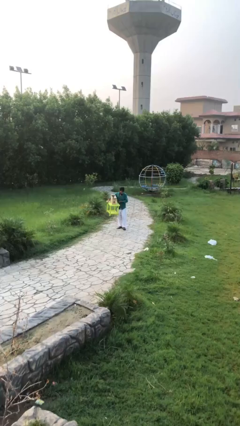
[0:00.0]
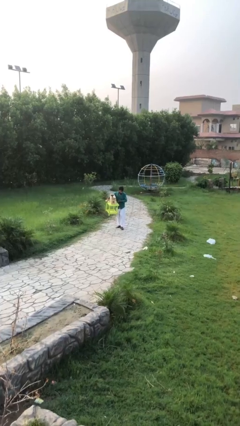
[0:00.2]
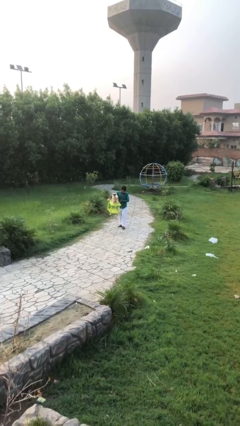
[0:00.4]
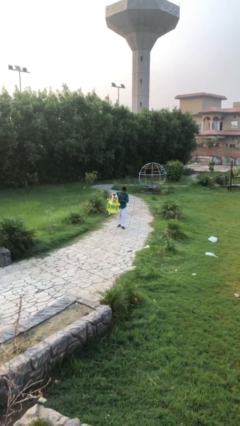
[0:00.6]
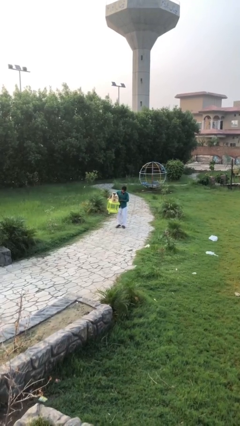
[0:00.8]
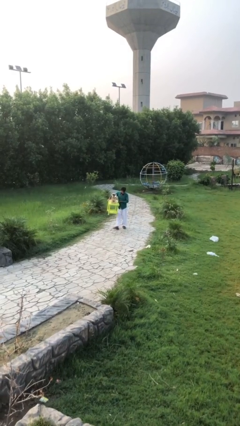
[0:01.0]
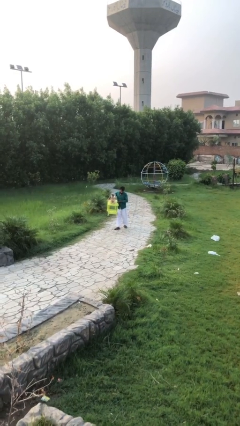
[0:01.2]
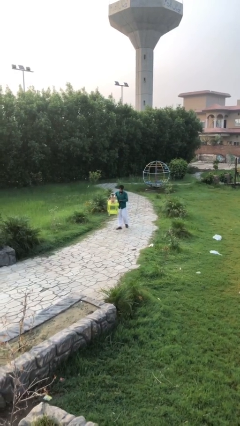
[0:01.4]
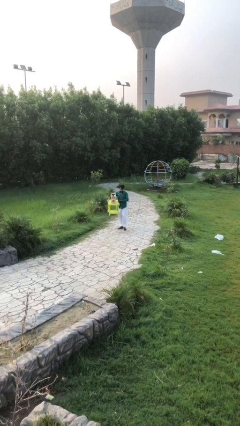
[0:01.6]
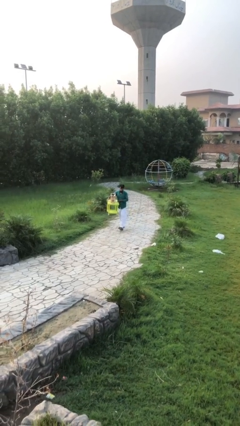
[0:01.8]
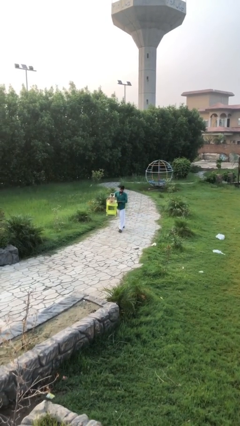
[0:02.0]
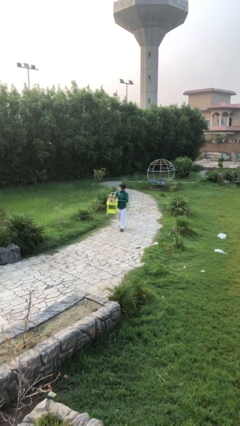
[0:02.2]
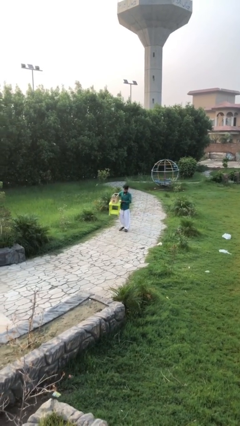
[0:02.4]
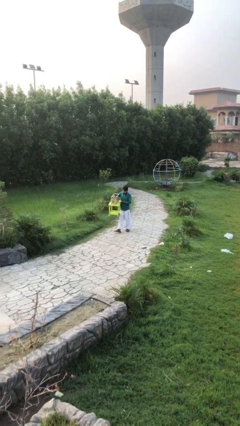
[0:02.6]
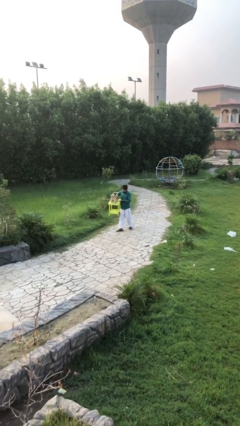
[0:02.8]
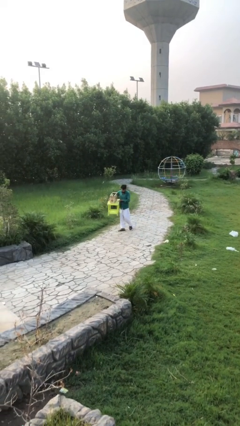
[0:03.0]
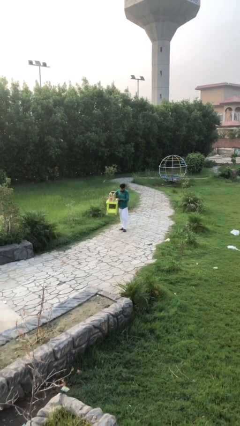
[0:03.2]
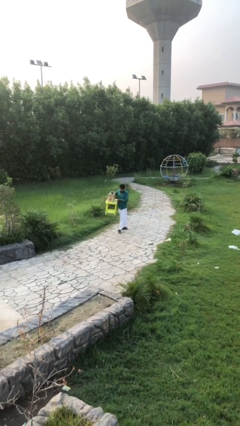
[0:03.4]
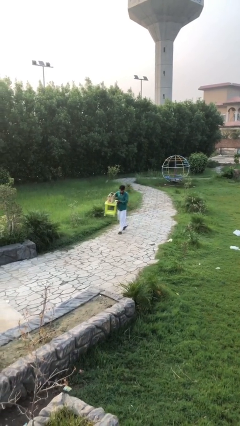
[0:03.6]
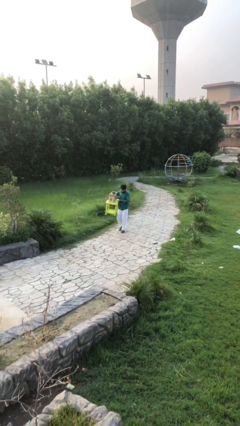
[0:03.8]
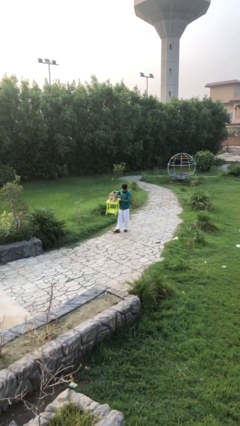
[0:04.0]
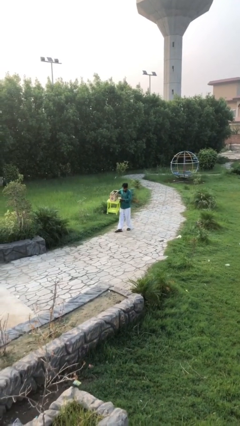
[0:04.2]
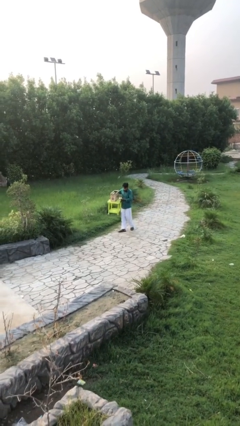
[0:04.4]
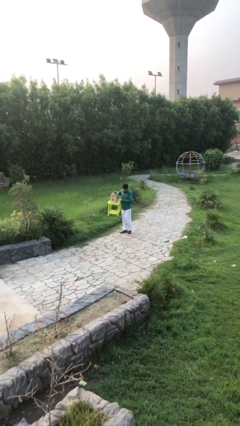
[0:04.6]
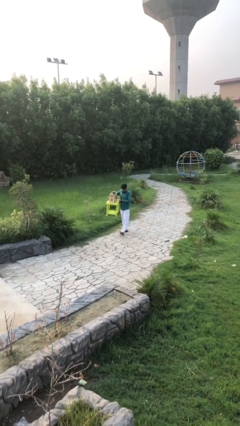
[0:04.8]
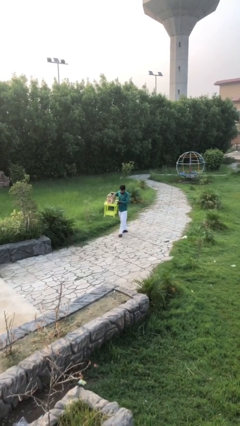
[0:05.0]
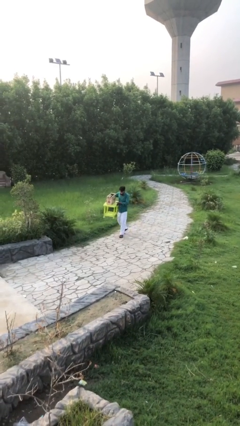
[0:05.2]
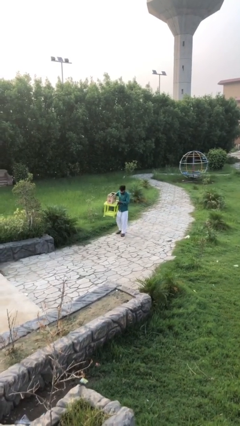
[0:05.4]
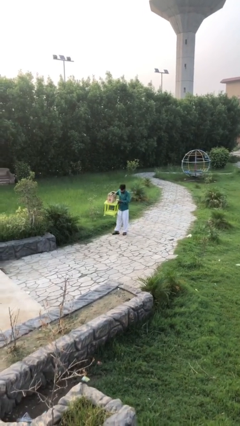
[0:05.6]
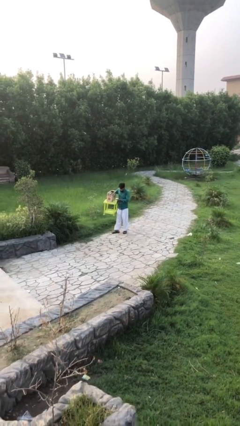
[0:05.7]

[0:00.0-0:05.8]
person carries heavy object

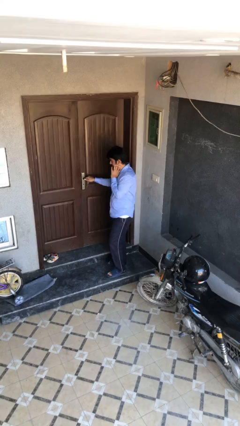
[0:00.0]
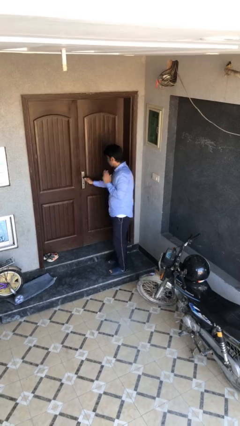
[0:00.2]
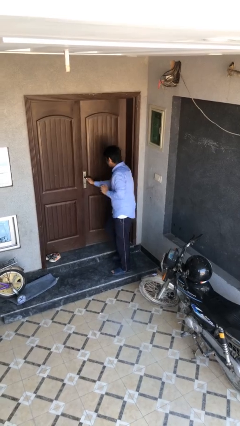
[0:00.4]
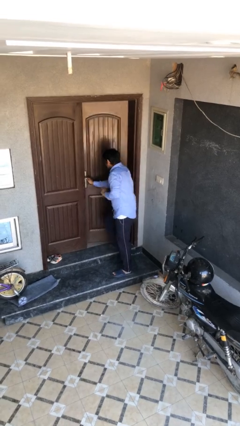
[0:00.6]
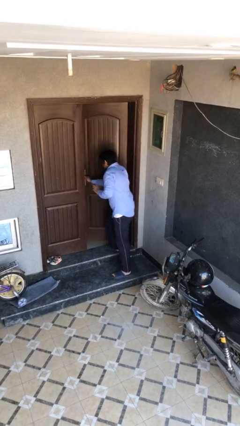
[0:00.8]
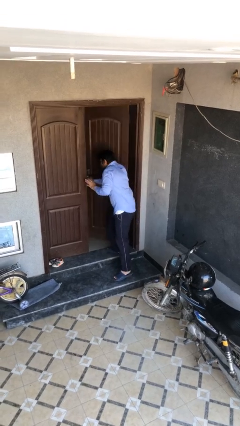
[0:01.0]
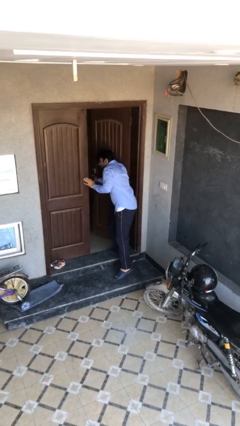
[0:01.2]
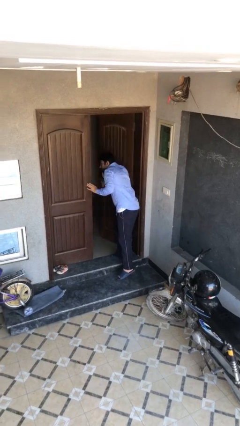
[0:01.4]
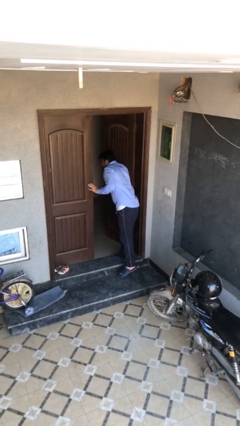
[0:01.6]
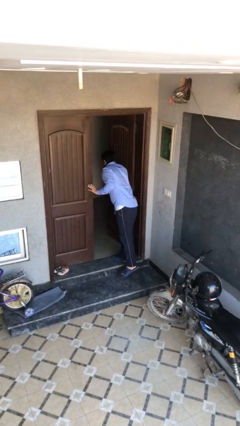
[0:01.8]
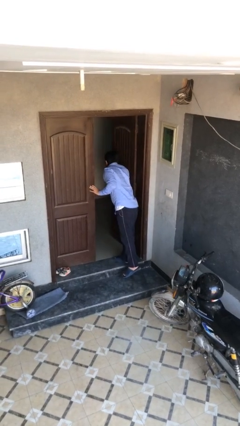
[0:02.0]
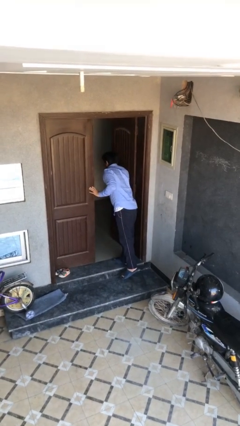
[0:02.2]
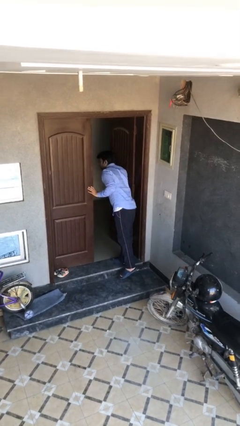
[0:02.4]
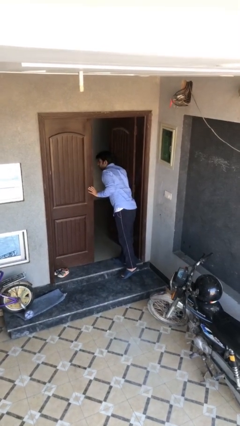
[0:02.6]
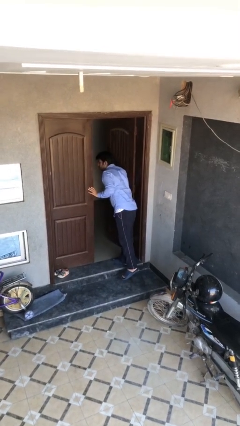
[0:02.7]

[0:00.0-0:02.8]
person opens facility door

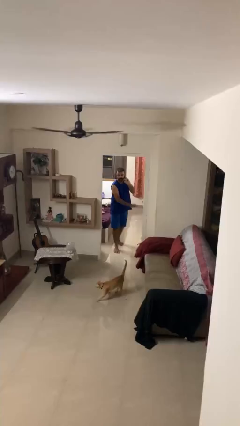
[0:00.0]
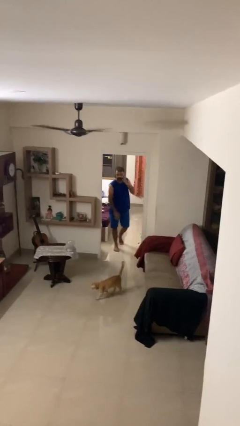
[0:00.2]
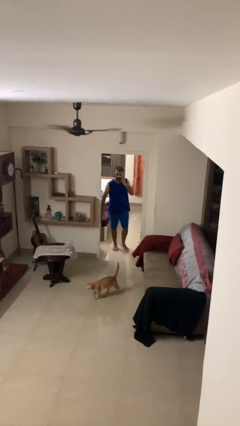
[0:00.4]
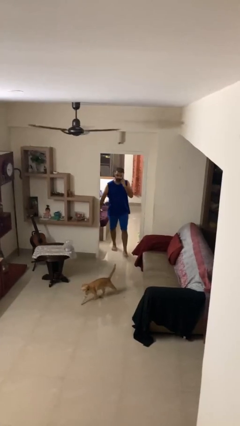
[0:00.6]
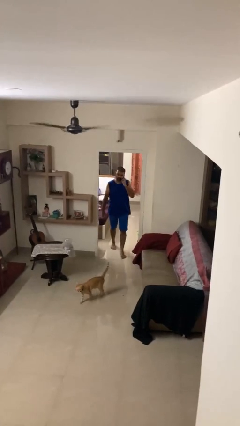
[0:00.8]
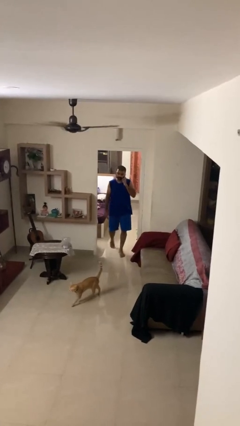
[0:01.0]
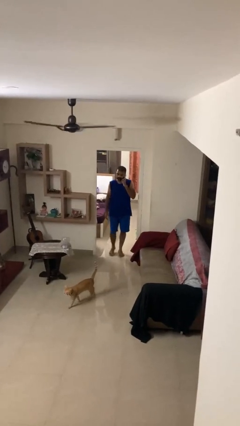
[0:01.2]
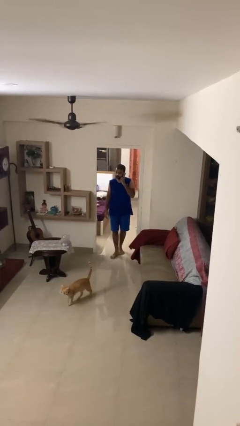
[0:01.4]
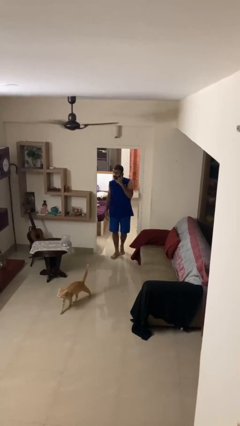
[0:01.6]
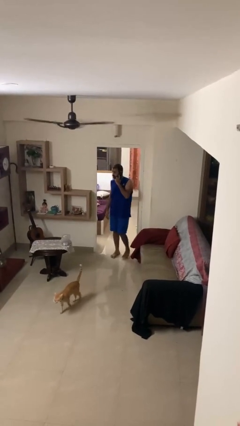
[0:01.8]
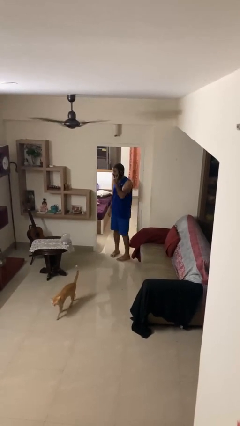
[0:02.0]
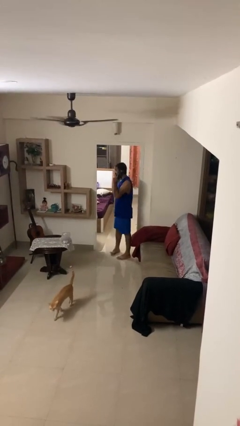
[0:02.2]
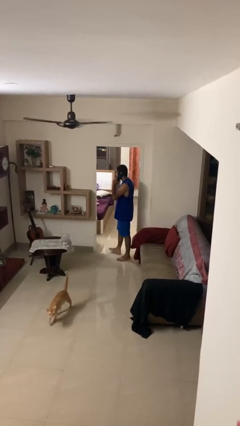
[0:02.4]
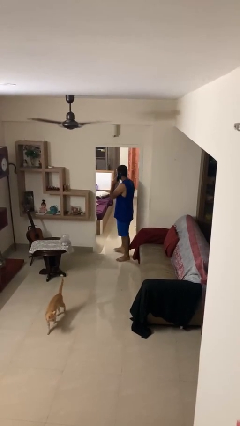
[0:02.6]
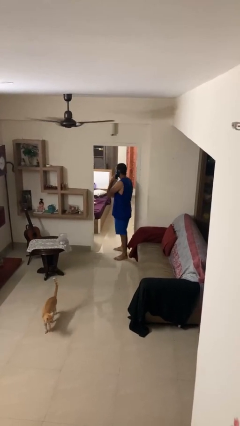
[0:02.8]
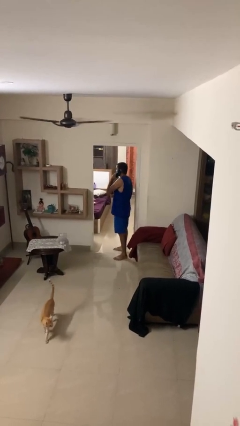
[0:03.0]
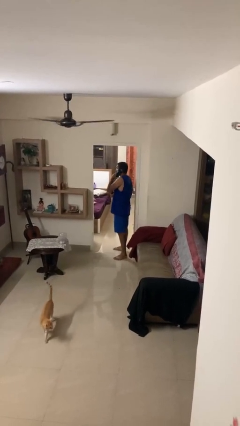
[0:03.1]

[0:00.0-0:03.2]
person enters scene through structure

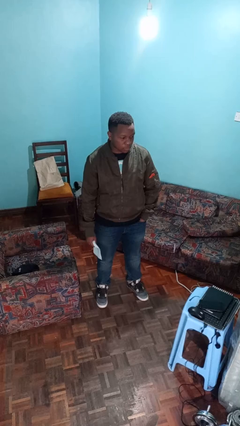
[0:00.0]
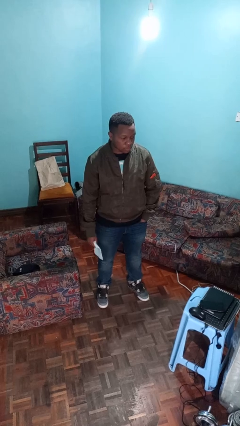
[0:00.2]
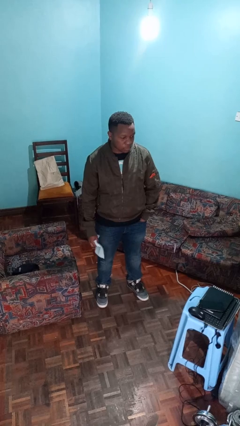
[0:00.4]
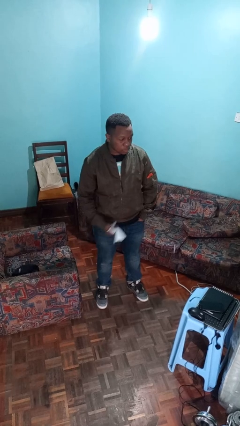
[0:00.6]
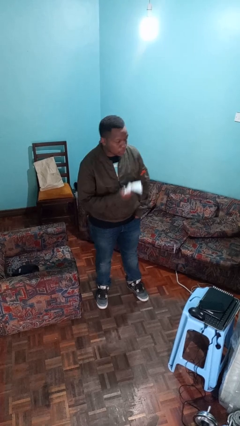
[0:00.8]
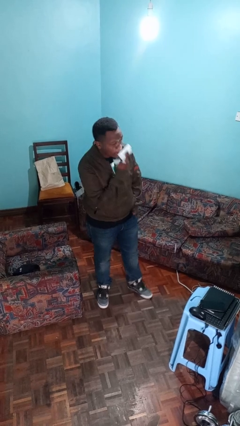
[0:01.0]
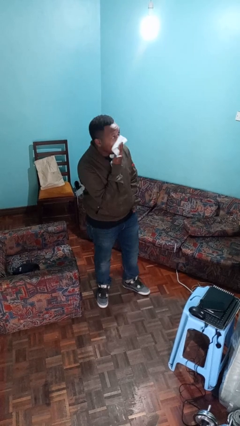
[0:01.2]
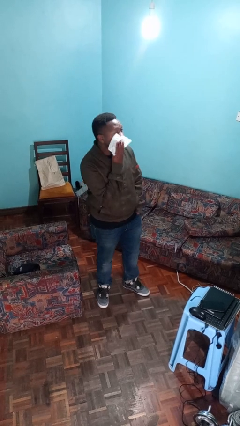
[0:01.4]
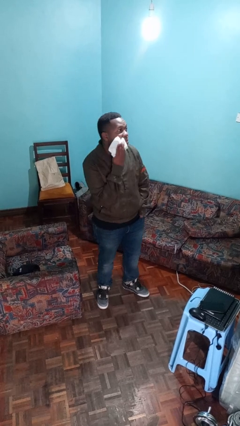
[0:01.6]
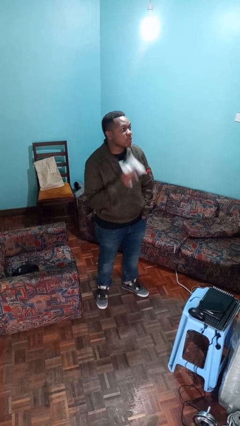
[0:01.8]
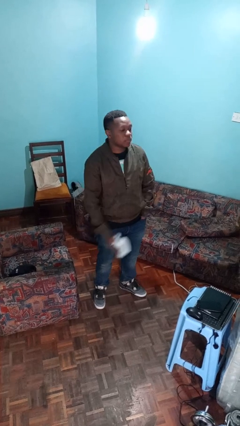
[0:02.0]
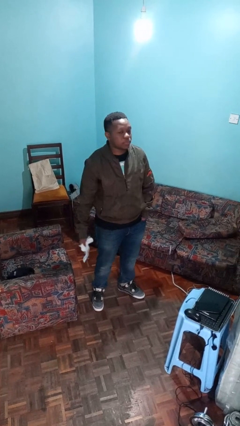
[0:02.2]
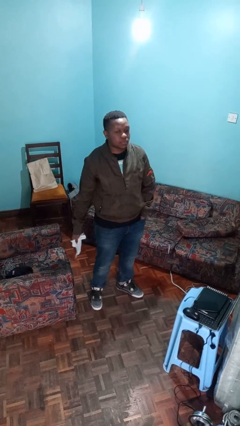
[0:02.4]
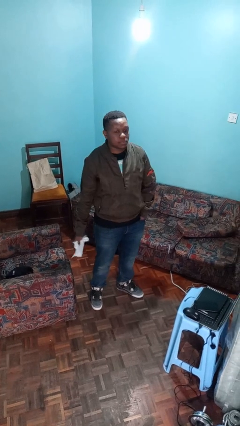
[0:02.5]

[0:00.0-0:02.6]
person wipes mouth with napkin

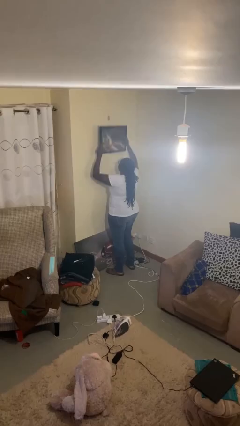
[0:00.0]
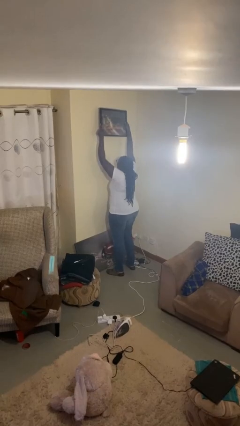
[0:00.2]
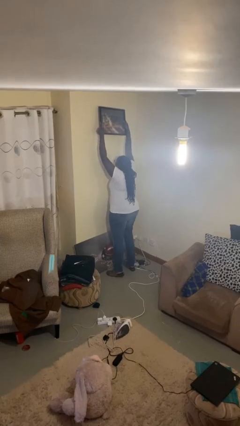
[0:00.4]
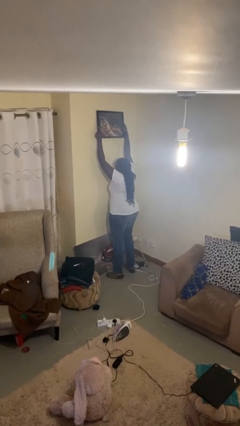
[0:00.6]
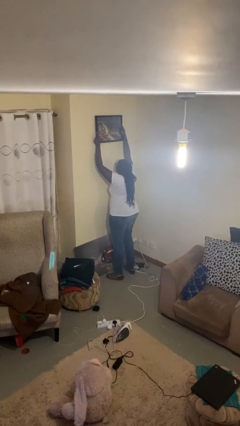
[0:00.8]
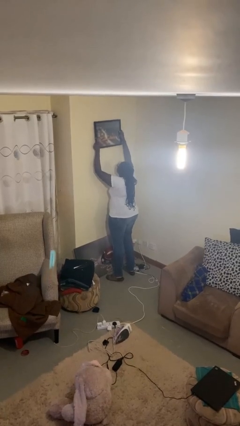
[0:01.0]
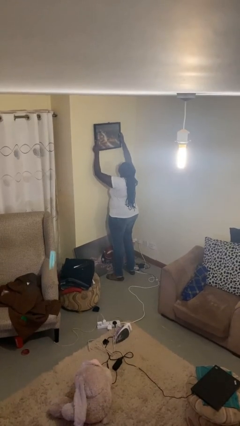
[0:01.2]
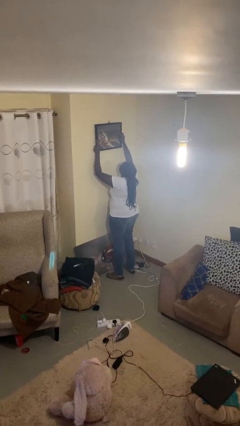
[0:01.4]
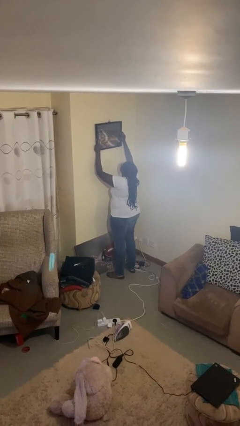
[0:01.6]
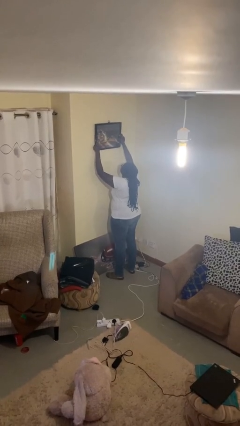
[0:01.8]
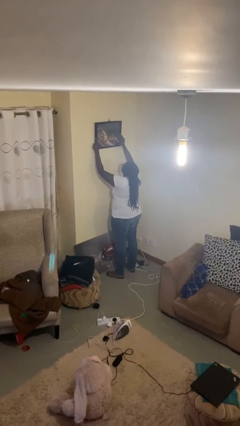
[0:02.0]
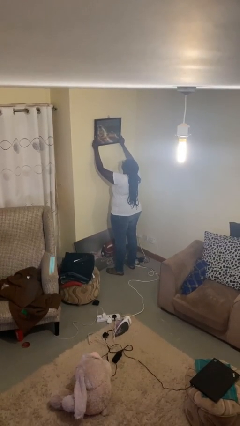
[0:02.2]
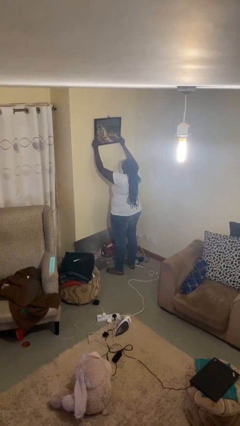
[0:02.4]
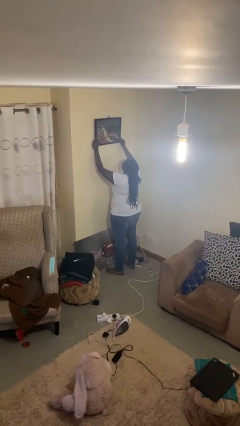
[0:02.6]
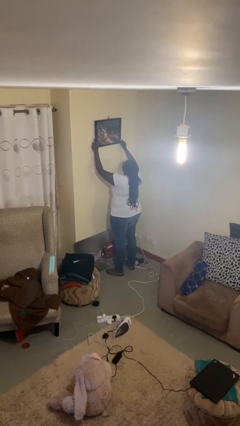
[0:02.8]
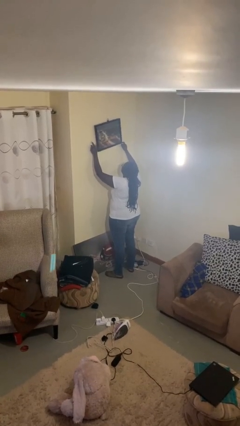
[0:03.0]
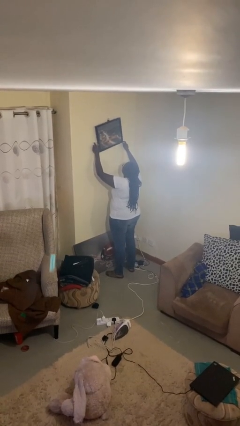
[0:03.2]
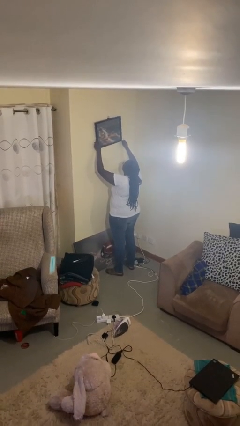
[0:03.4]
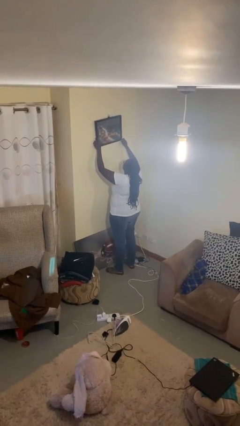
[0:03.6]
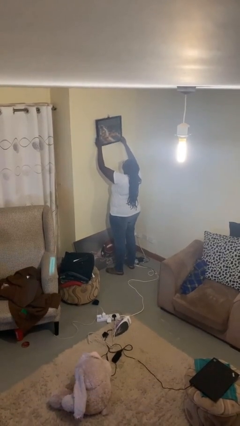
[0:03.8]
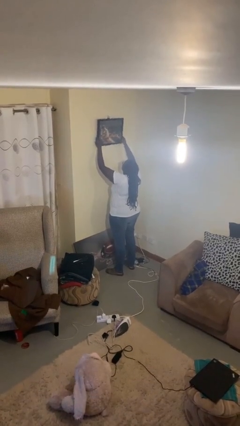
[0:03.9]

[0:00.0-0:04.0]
person puts up picture frame
